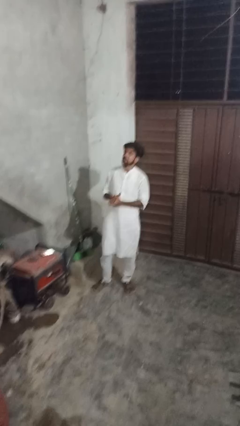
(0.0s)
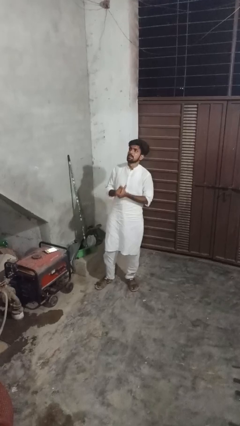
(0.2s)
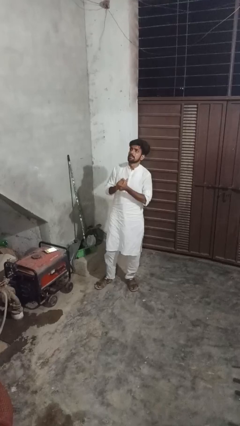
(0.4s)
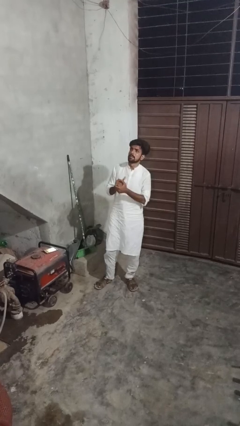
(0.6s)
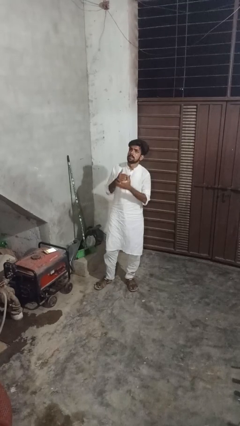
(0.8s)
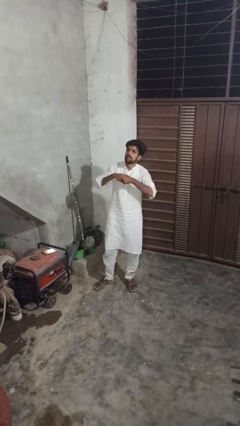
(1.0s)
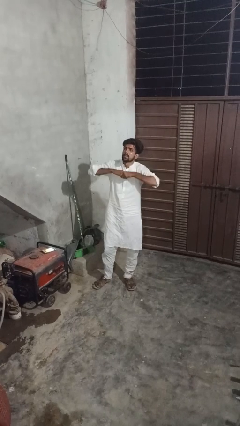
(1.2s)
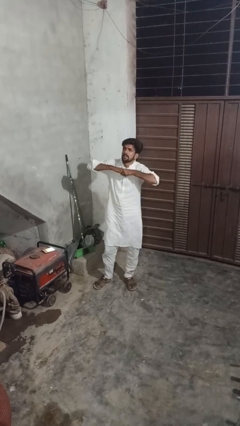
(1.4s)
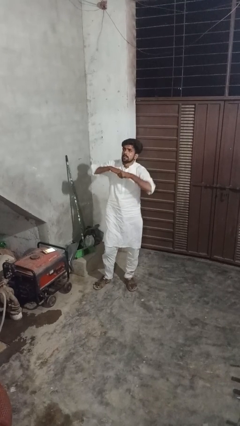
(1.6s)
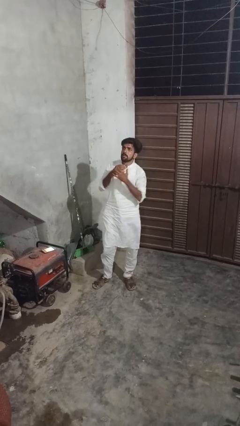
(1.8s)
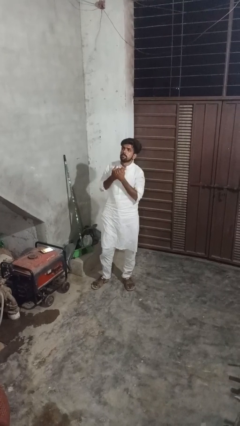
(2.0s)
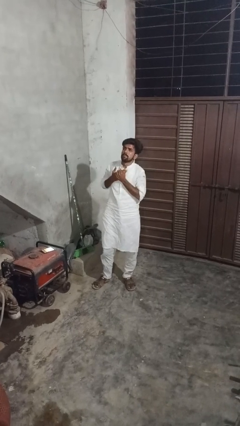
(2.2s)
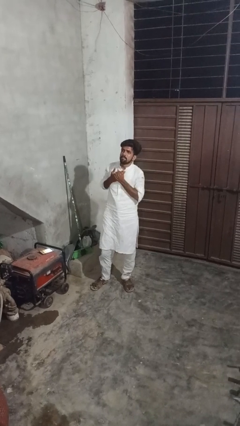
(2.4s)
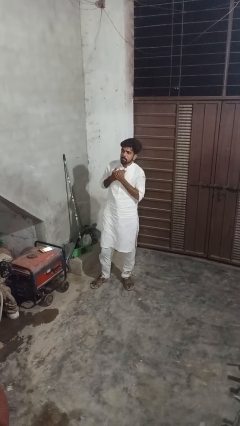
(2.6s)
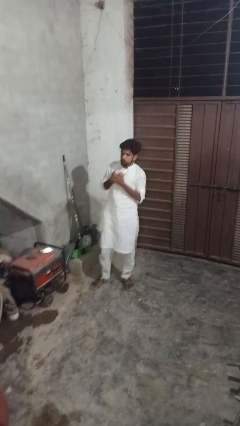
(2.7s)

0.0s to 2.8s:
person cracks knuckles

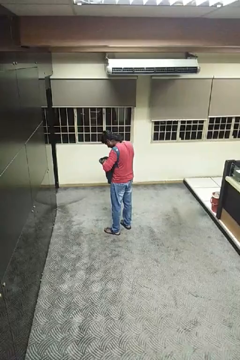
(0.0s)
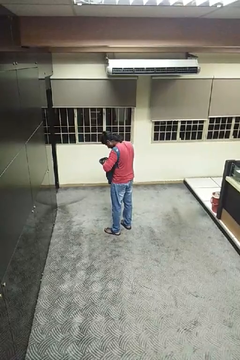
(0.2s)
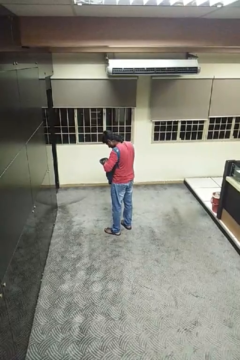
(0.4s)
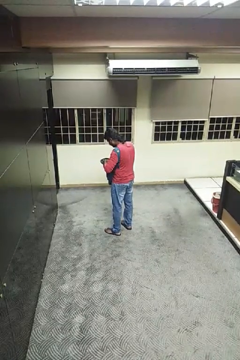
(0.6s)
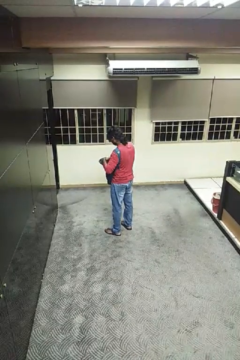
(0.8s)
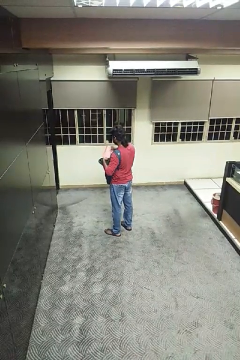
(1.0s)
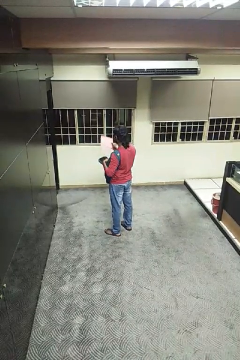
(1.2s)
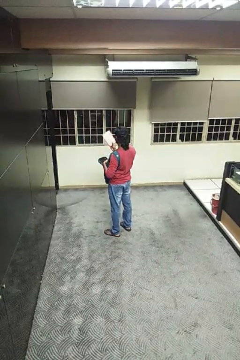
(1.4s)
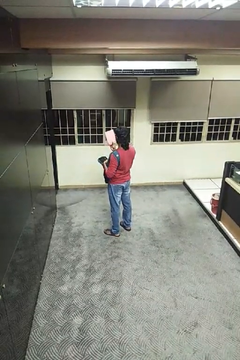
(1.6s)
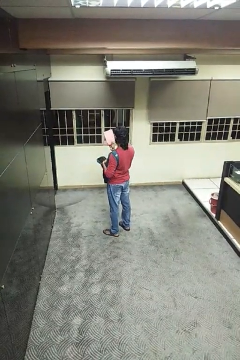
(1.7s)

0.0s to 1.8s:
person takes object from backpack

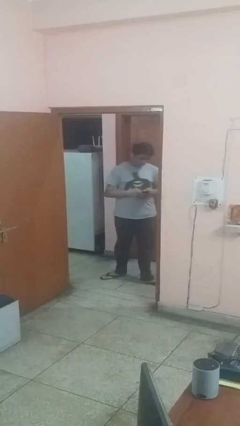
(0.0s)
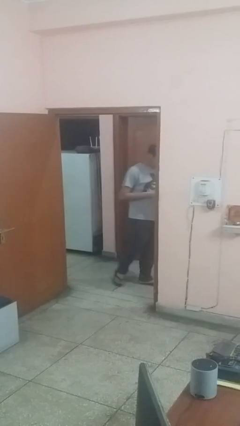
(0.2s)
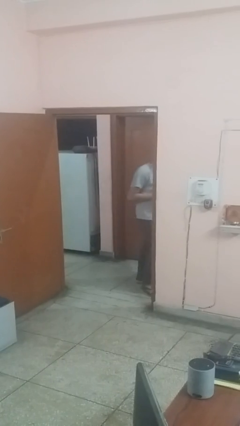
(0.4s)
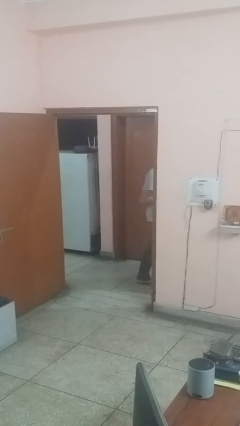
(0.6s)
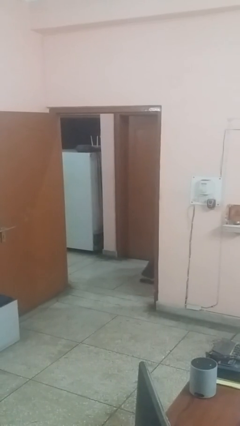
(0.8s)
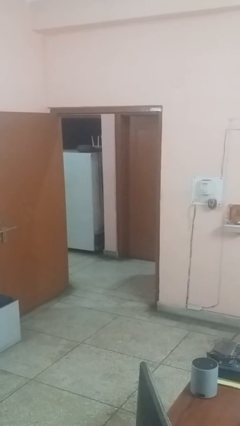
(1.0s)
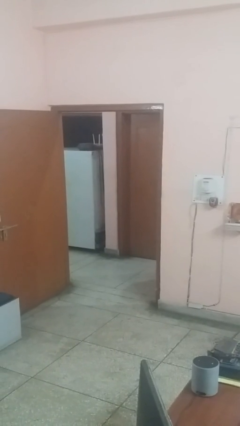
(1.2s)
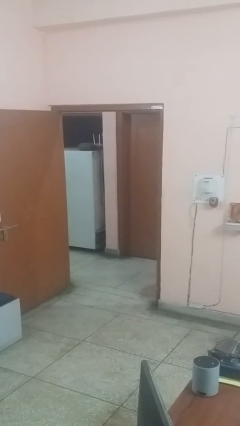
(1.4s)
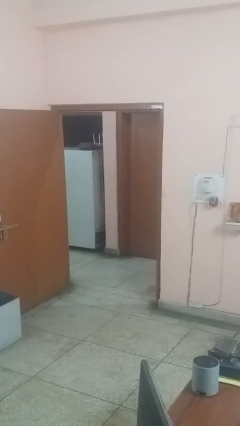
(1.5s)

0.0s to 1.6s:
person exits scene through structure

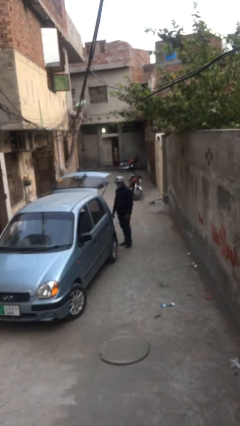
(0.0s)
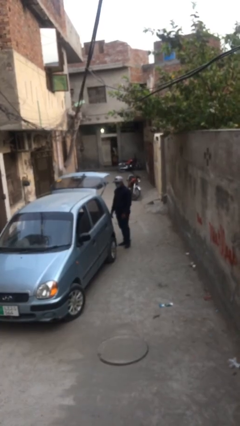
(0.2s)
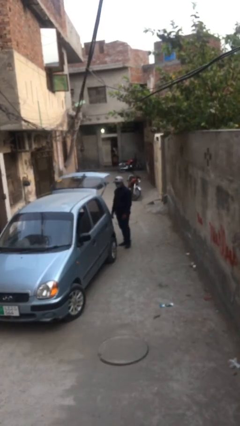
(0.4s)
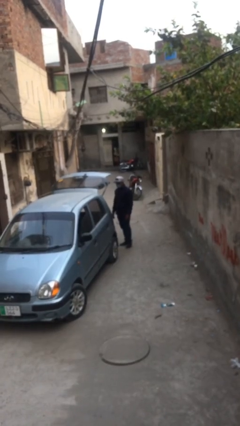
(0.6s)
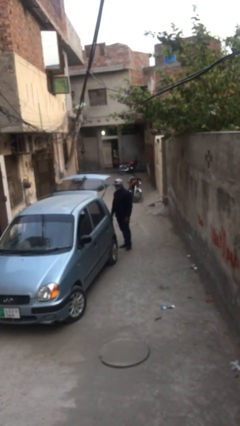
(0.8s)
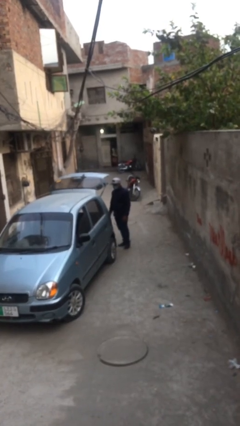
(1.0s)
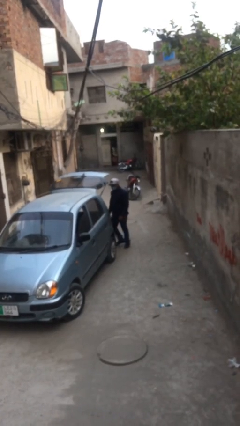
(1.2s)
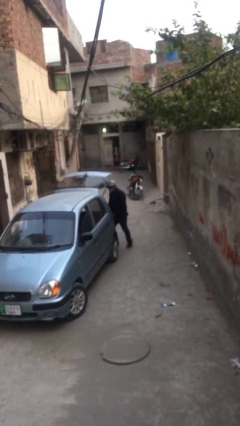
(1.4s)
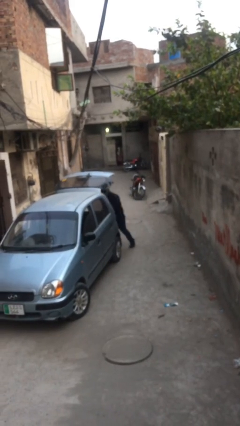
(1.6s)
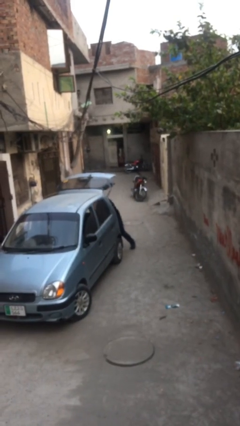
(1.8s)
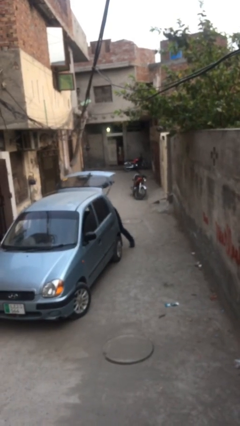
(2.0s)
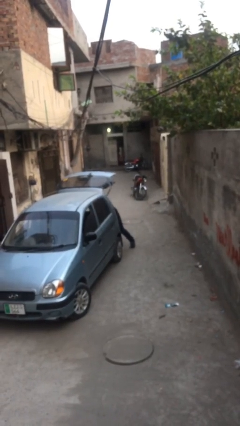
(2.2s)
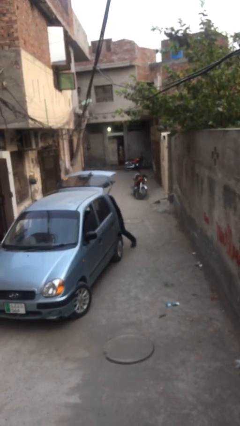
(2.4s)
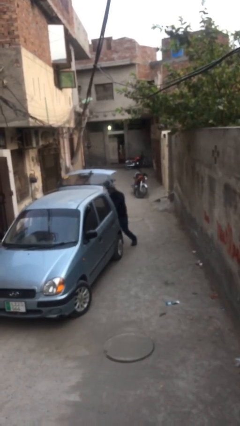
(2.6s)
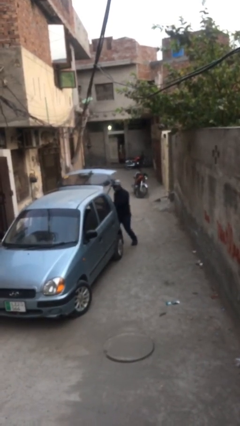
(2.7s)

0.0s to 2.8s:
person unloads car

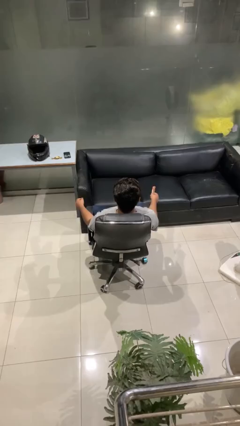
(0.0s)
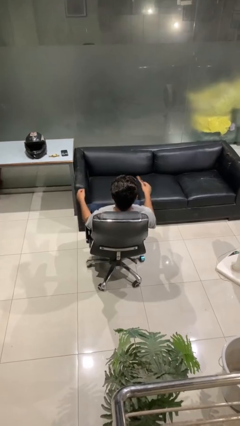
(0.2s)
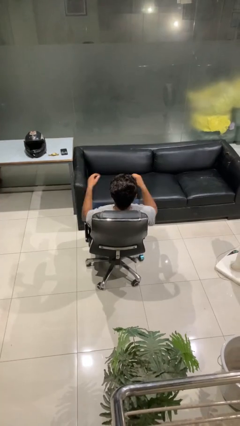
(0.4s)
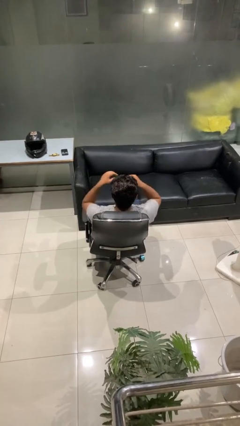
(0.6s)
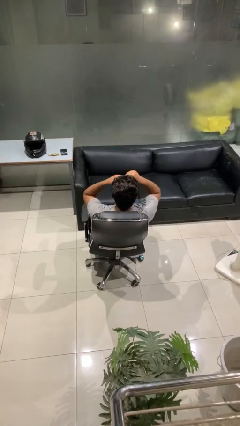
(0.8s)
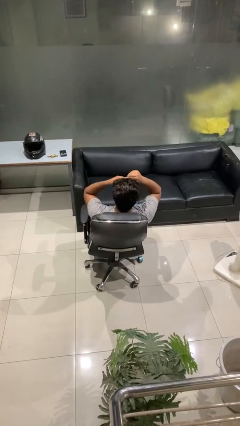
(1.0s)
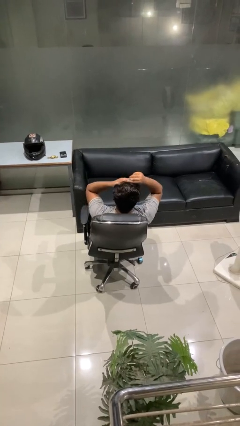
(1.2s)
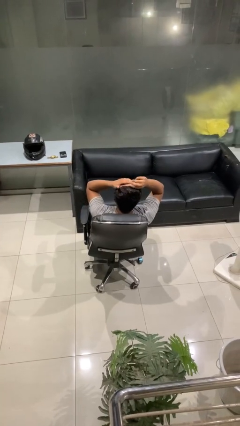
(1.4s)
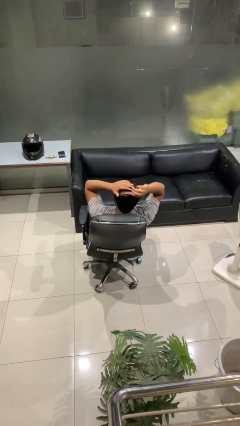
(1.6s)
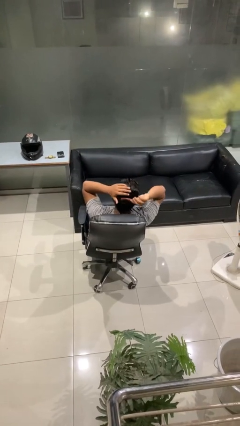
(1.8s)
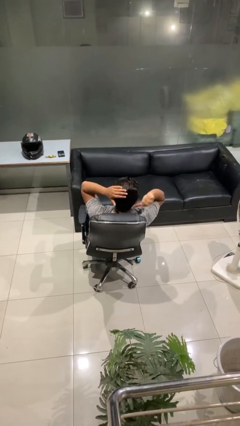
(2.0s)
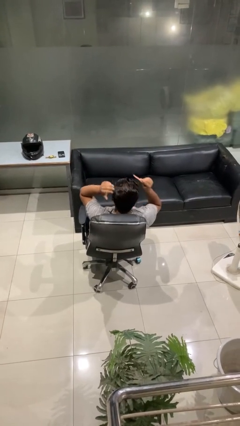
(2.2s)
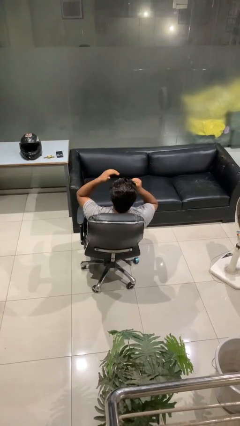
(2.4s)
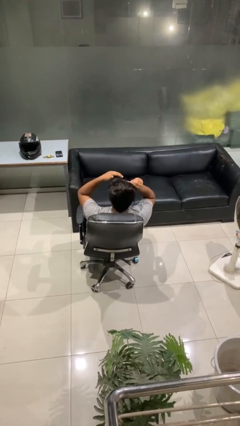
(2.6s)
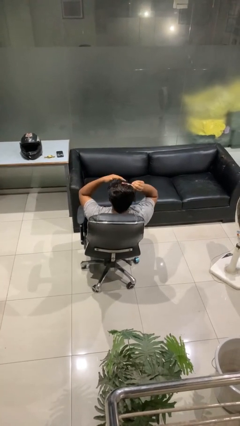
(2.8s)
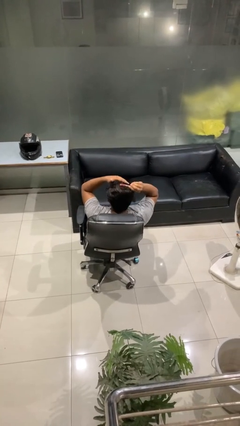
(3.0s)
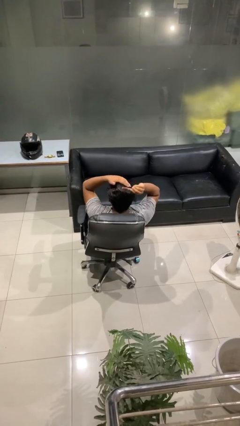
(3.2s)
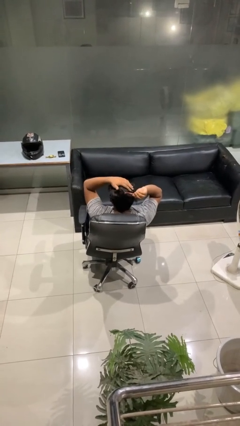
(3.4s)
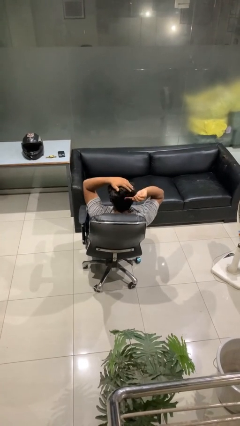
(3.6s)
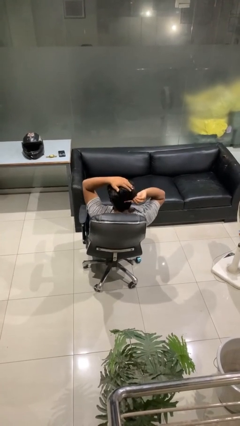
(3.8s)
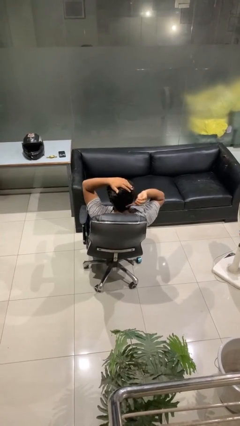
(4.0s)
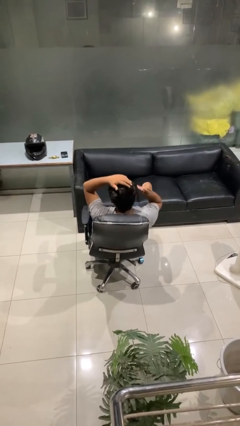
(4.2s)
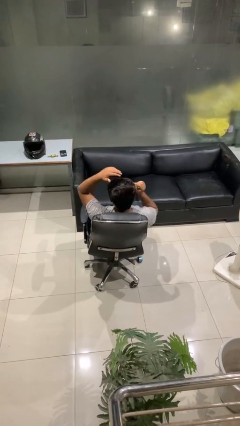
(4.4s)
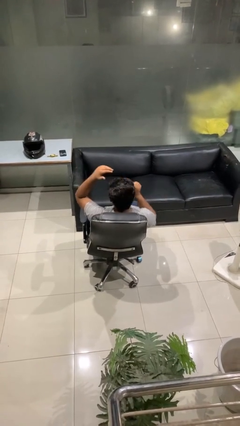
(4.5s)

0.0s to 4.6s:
person brushes hair

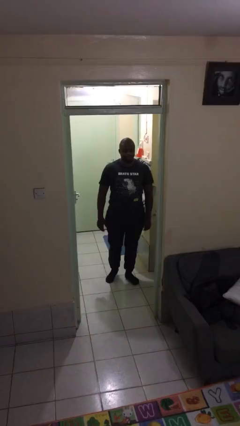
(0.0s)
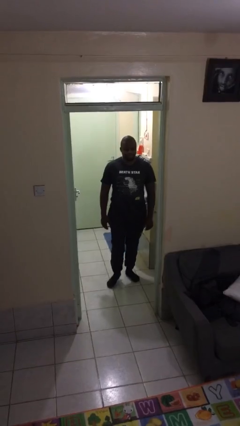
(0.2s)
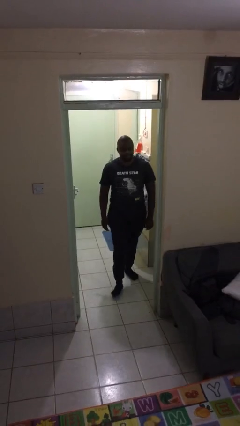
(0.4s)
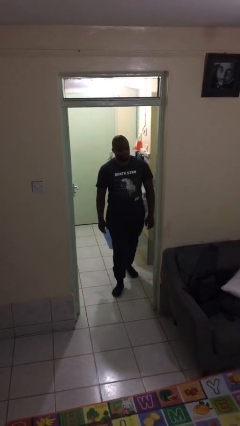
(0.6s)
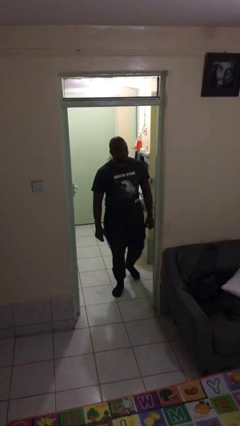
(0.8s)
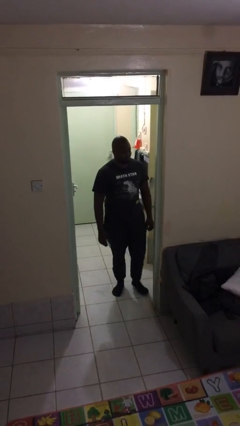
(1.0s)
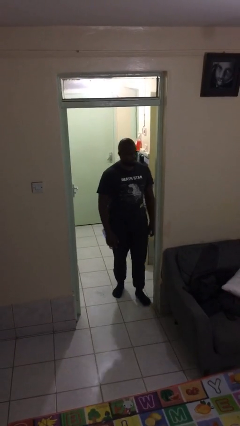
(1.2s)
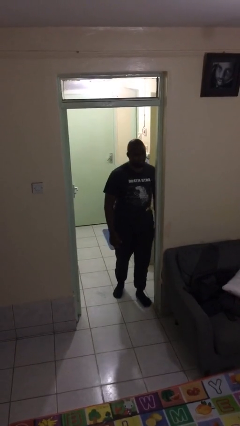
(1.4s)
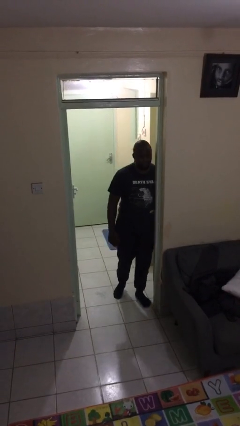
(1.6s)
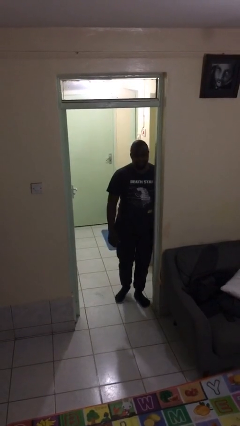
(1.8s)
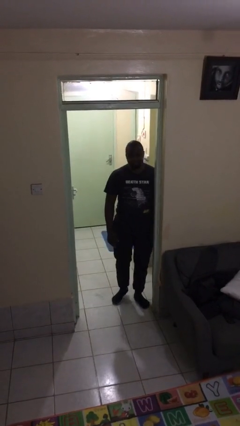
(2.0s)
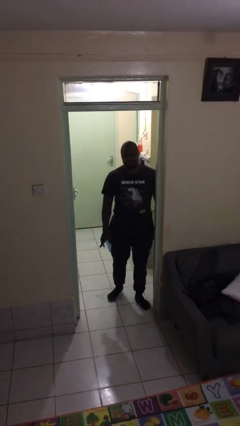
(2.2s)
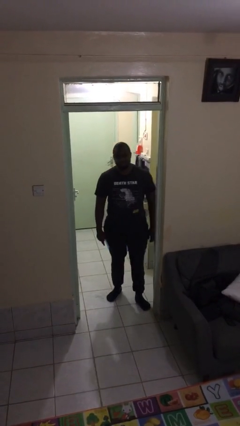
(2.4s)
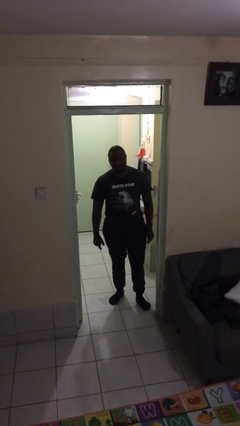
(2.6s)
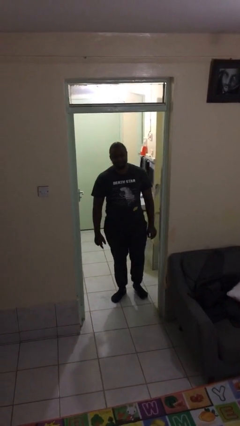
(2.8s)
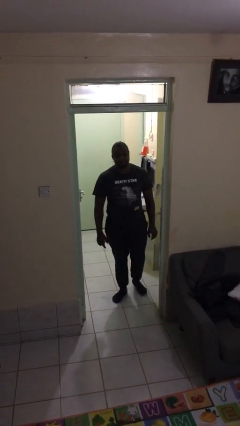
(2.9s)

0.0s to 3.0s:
person bumps into wall

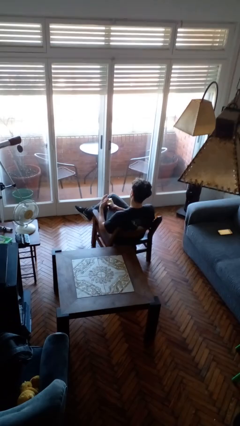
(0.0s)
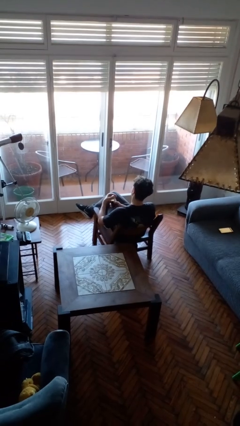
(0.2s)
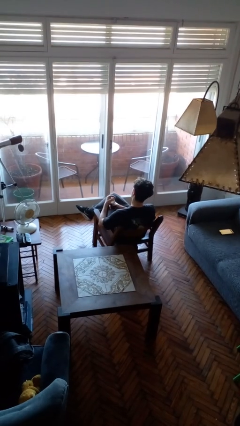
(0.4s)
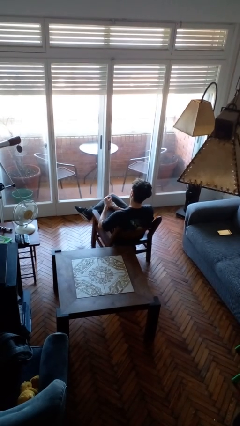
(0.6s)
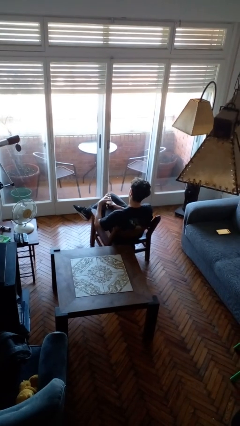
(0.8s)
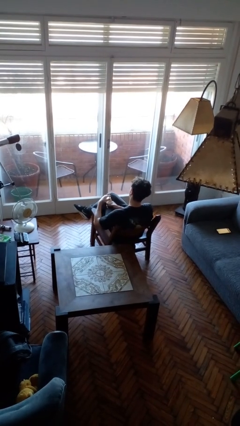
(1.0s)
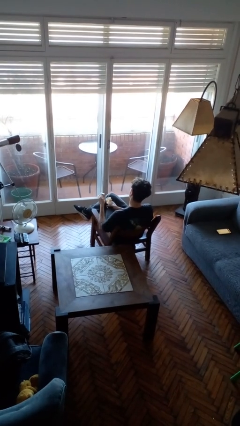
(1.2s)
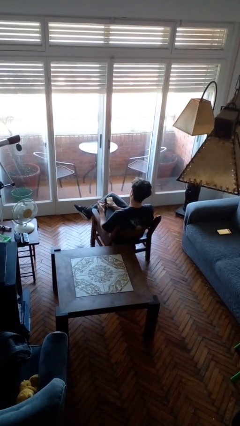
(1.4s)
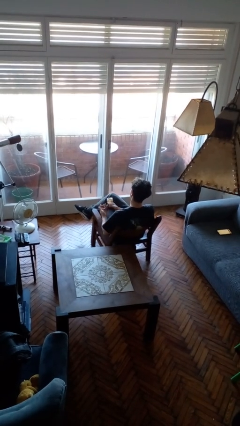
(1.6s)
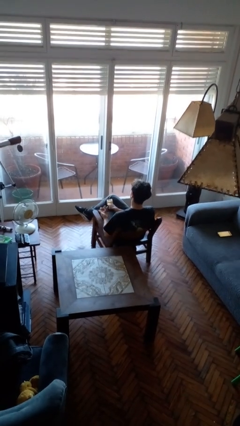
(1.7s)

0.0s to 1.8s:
person opens jar
